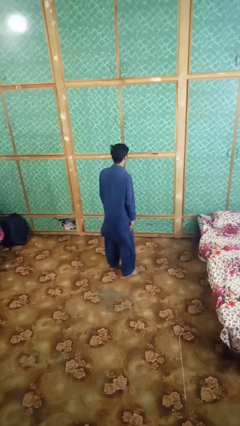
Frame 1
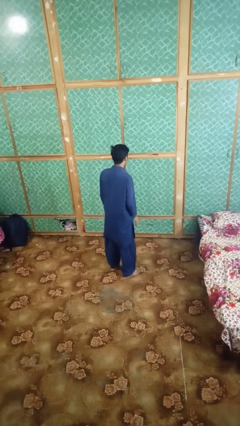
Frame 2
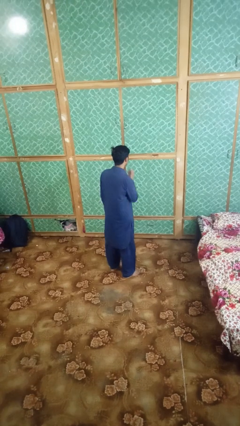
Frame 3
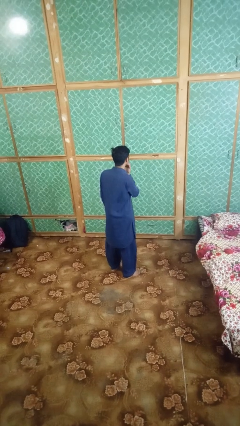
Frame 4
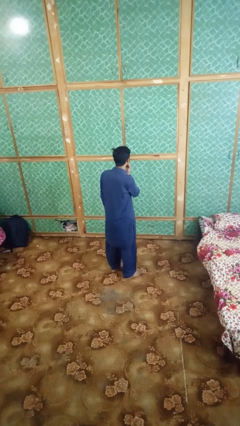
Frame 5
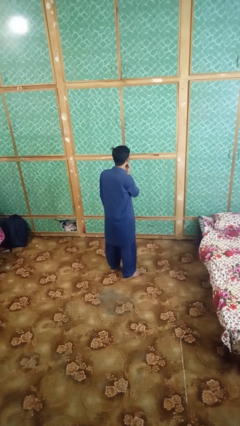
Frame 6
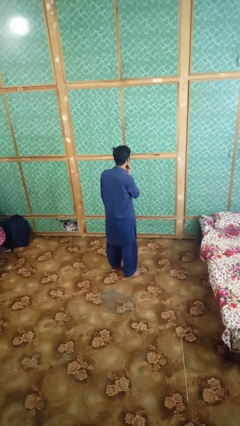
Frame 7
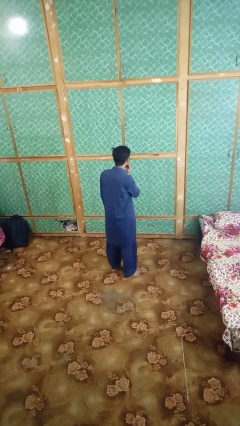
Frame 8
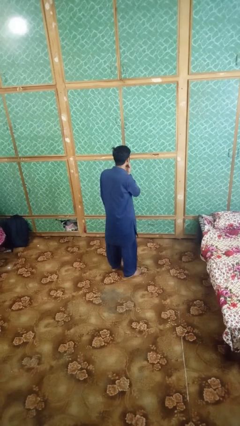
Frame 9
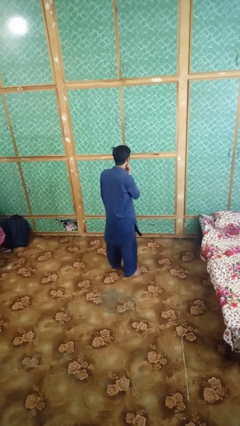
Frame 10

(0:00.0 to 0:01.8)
person strokes chin

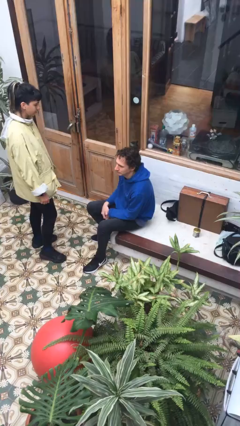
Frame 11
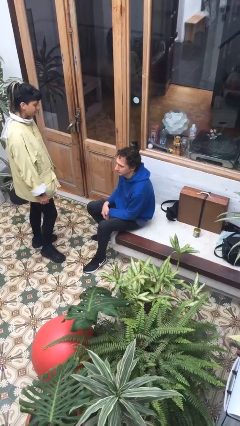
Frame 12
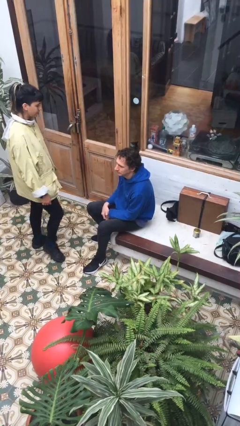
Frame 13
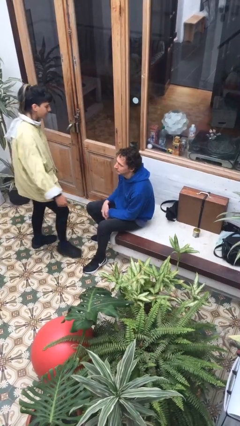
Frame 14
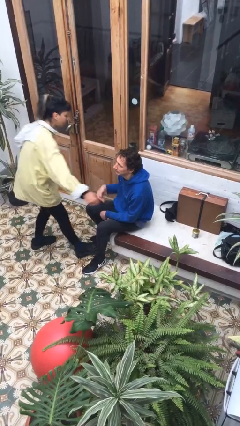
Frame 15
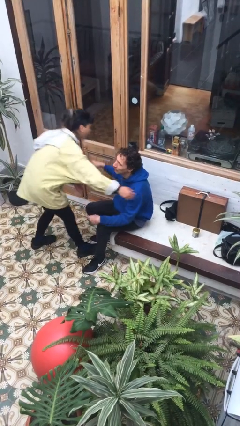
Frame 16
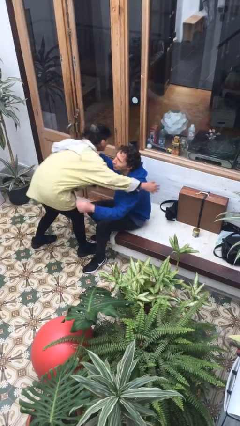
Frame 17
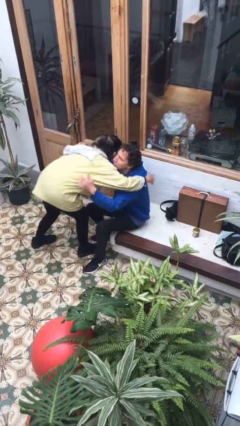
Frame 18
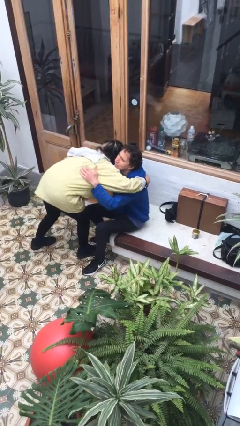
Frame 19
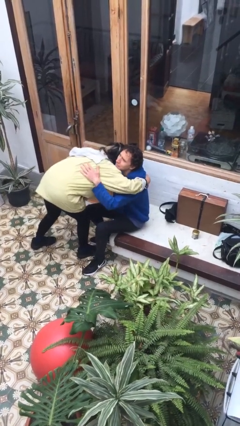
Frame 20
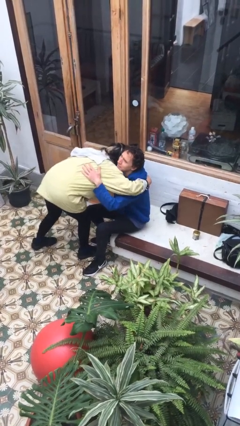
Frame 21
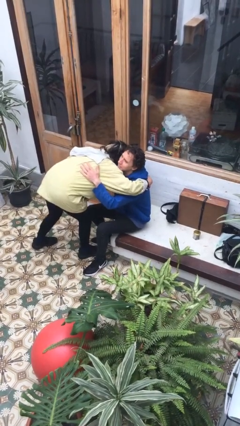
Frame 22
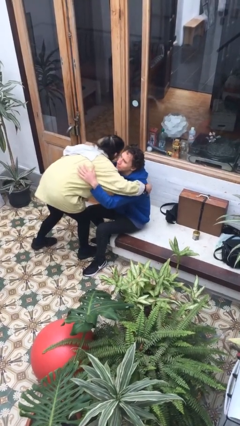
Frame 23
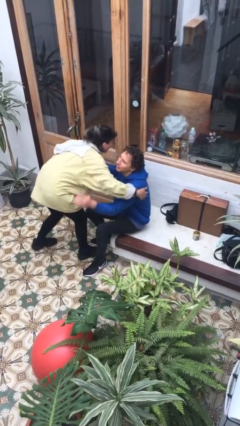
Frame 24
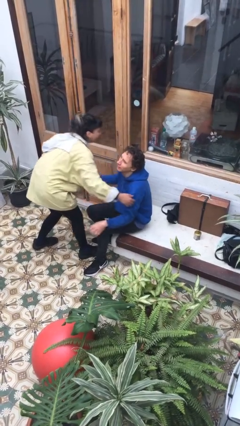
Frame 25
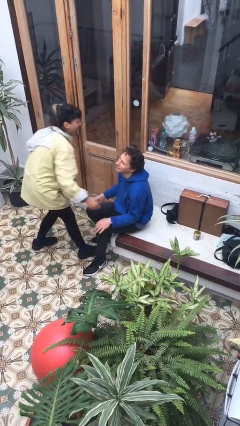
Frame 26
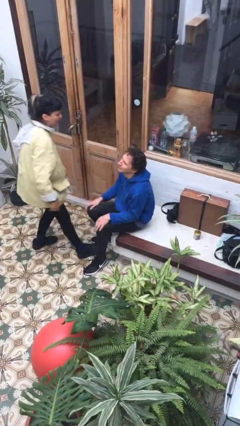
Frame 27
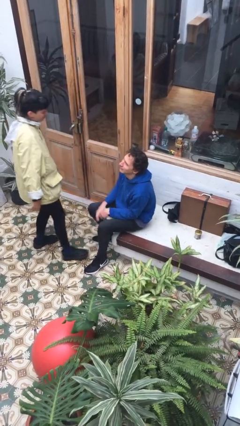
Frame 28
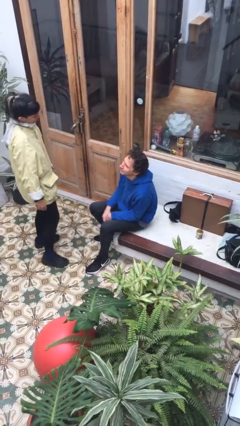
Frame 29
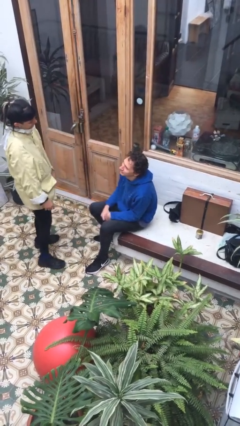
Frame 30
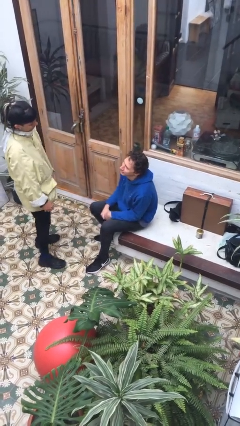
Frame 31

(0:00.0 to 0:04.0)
person embraces person

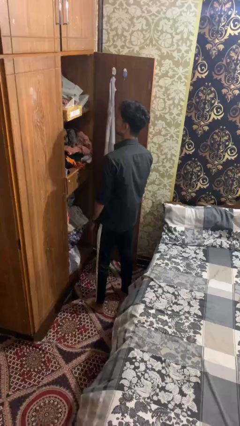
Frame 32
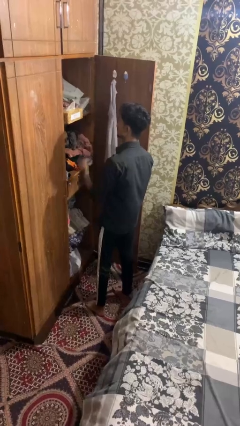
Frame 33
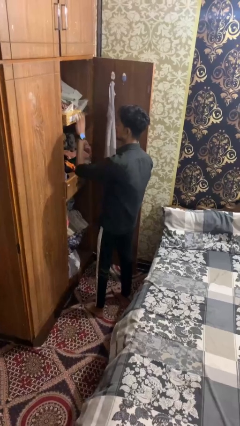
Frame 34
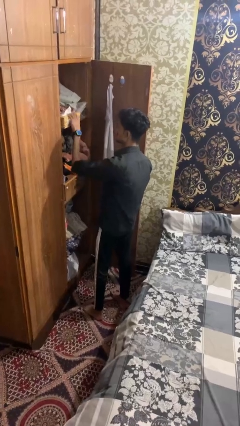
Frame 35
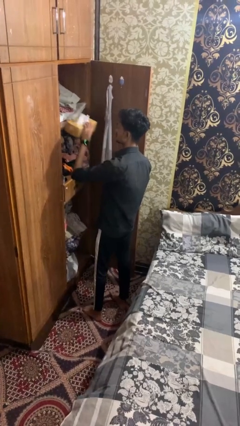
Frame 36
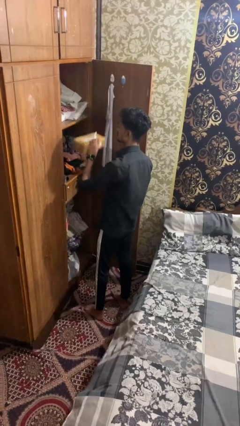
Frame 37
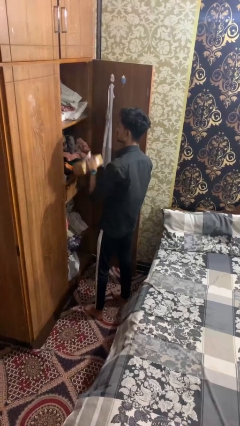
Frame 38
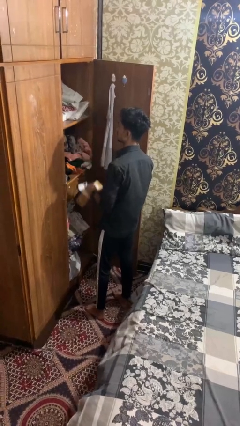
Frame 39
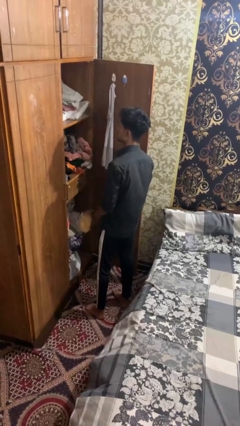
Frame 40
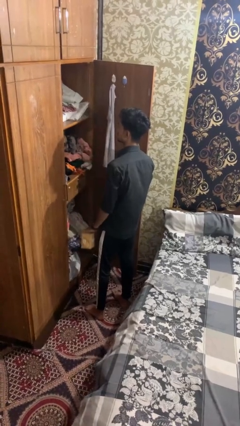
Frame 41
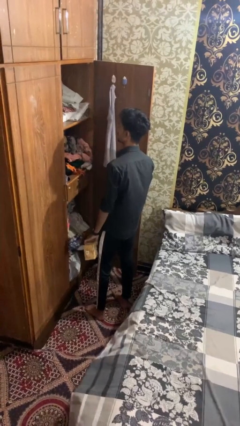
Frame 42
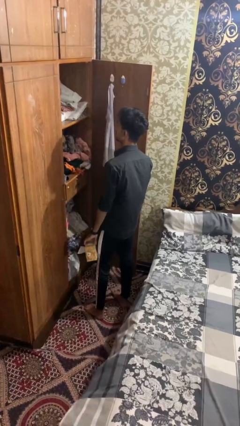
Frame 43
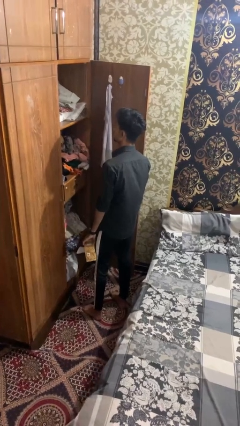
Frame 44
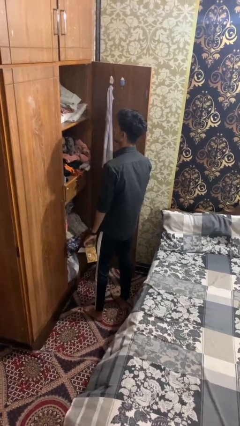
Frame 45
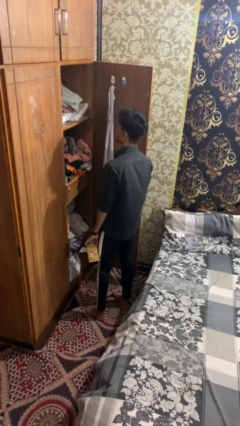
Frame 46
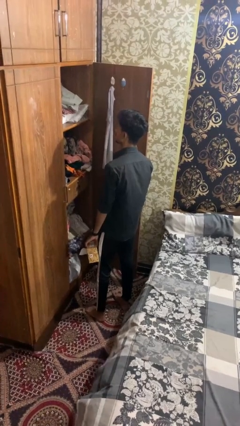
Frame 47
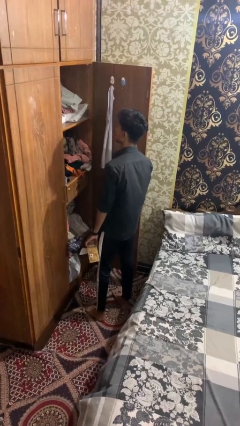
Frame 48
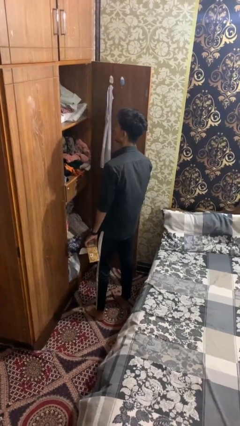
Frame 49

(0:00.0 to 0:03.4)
person picks up object from countertop

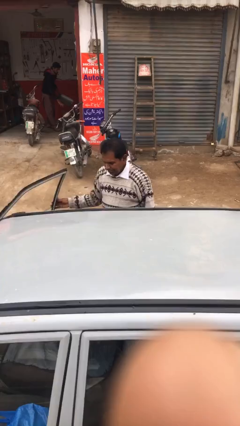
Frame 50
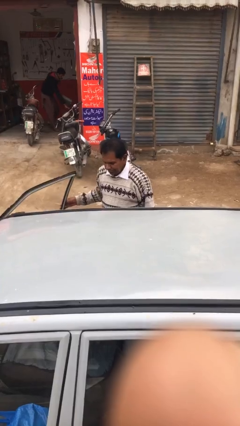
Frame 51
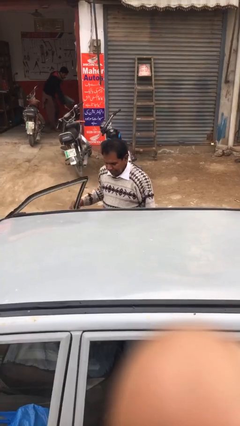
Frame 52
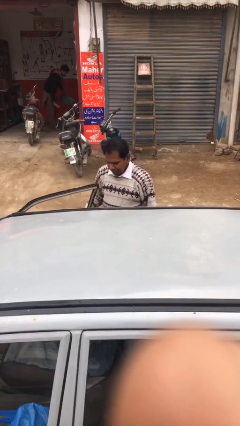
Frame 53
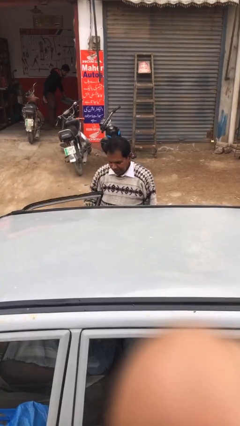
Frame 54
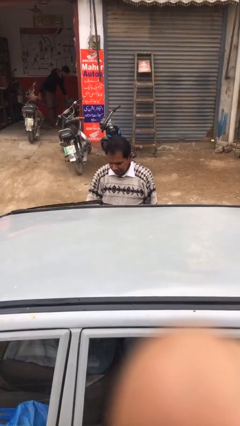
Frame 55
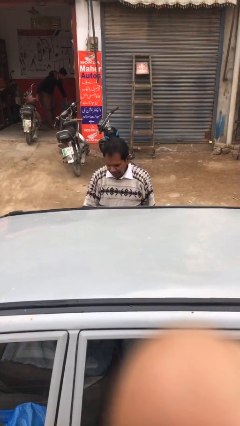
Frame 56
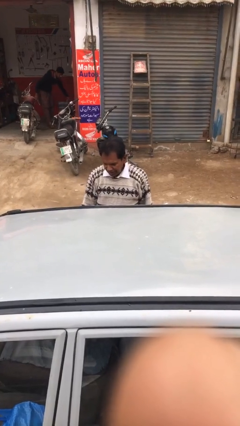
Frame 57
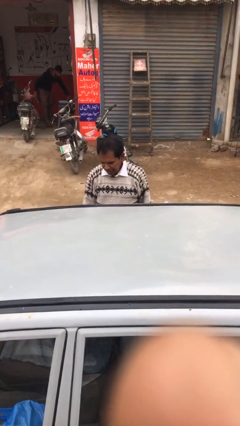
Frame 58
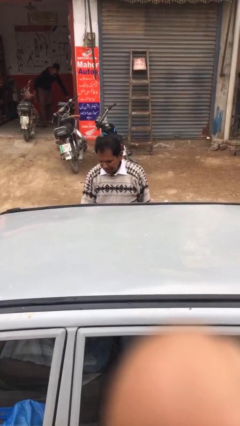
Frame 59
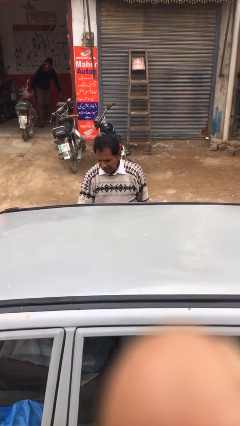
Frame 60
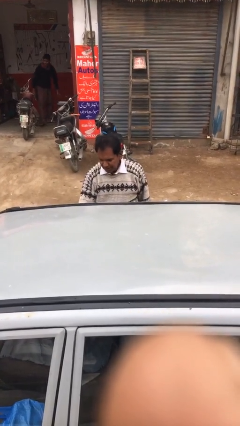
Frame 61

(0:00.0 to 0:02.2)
person closes car door

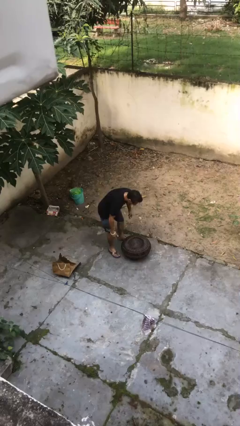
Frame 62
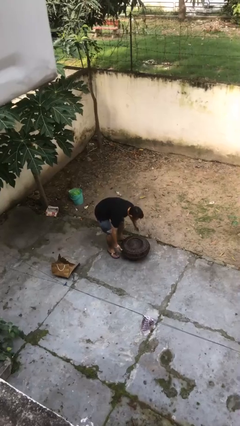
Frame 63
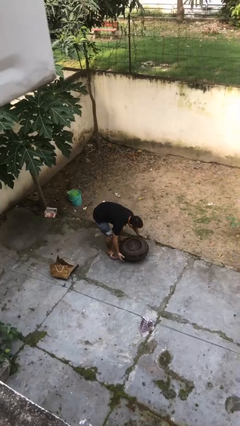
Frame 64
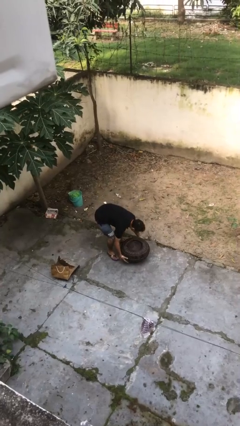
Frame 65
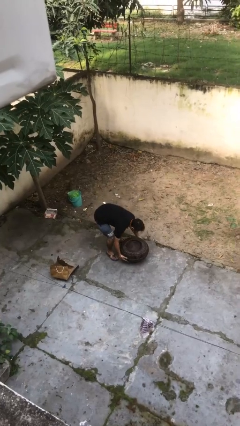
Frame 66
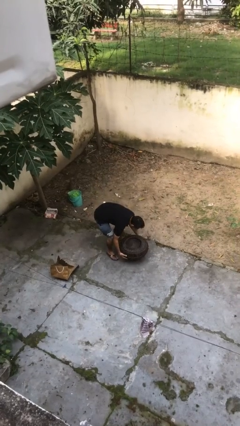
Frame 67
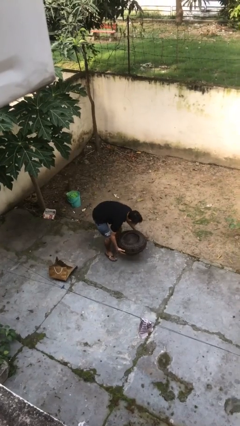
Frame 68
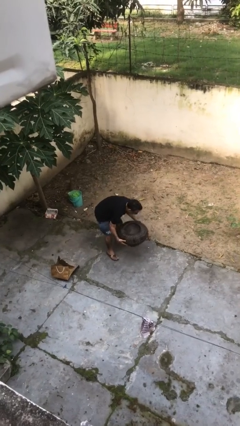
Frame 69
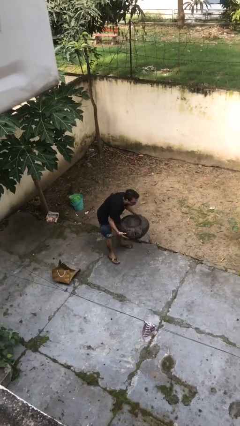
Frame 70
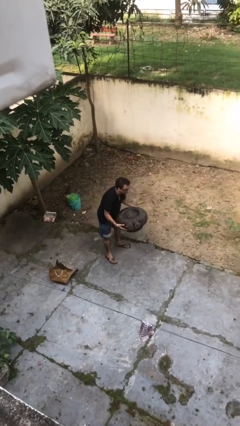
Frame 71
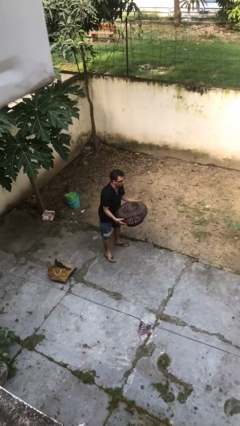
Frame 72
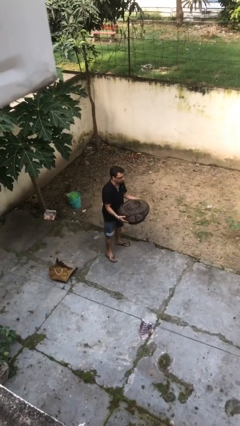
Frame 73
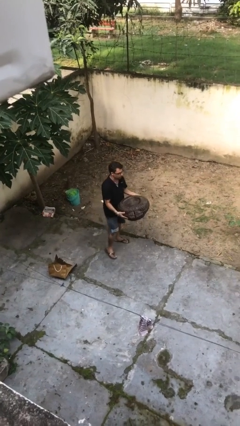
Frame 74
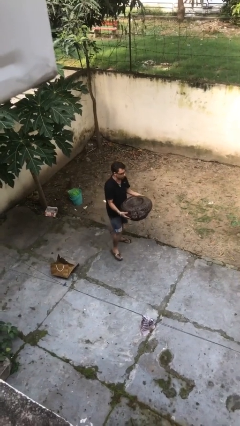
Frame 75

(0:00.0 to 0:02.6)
person picks up object from floor

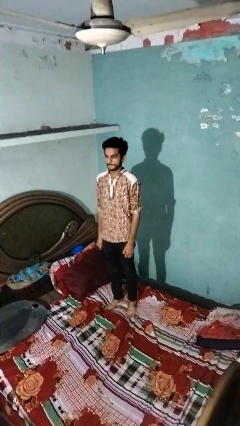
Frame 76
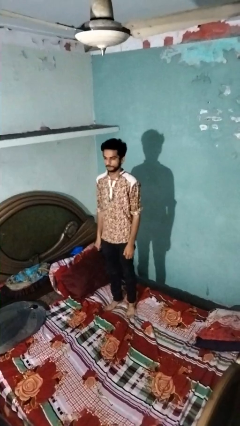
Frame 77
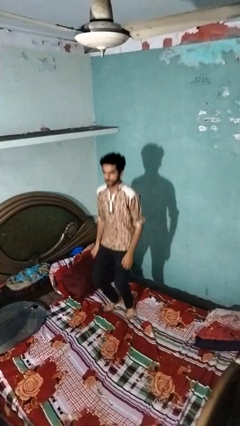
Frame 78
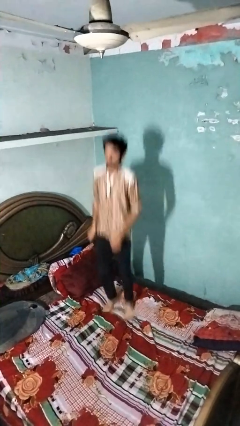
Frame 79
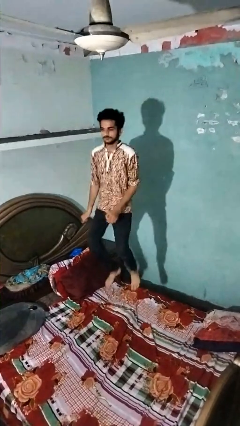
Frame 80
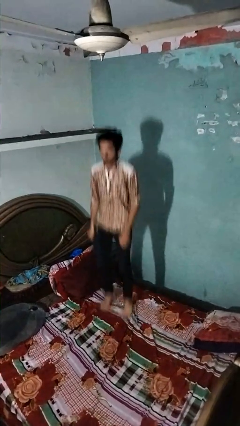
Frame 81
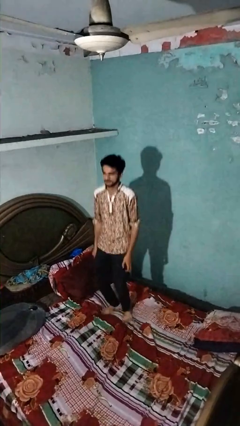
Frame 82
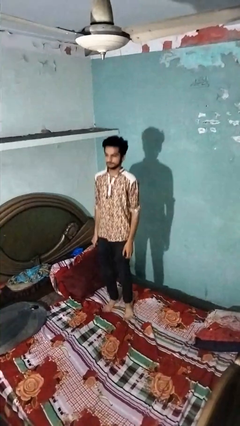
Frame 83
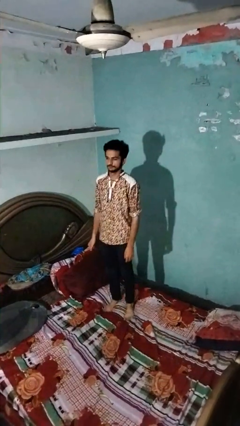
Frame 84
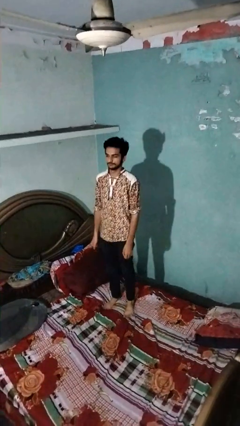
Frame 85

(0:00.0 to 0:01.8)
person jumps on bed

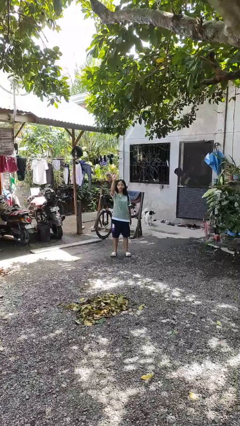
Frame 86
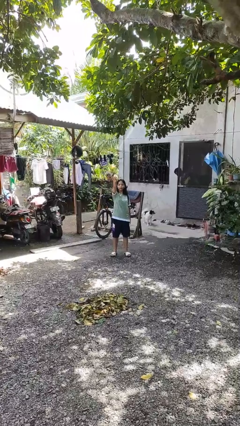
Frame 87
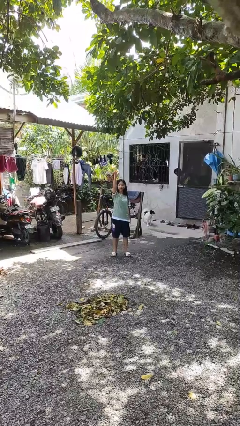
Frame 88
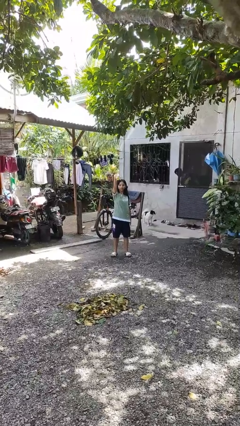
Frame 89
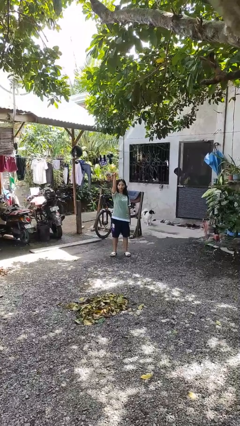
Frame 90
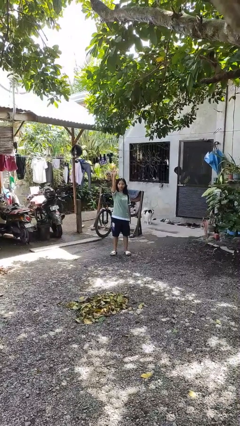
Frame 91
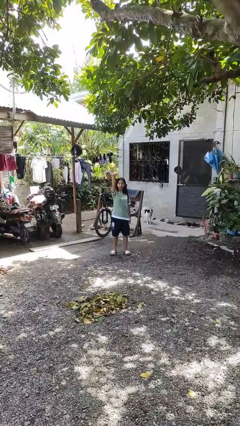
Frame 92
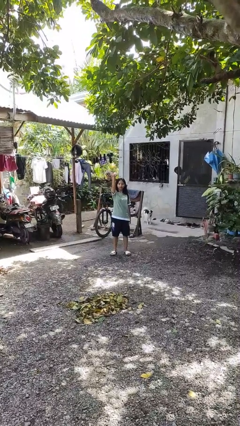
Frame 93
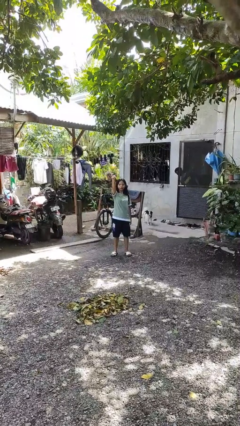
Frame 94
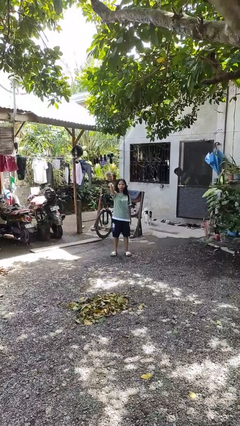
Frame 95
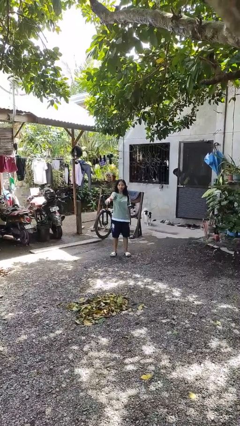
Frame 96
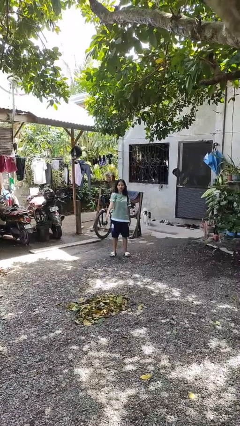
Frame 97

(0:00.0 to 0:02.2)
person gestures come here
